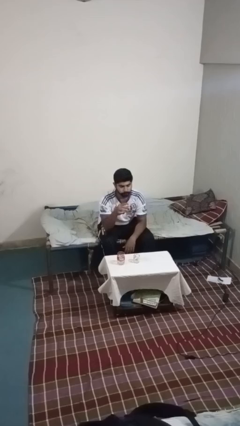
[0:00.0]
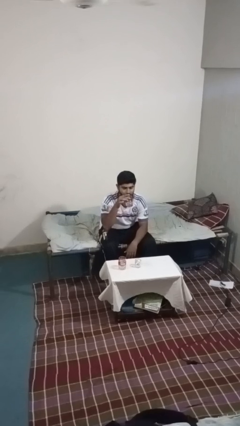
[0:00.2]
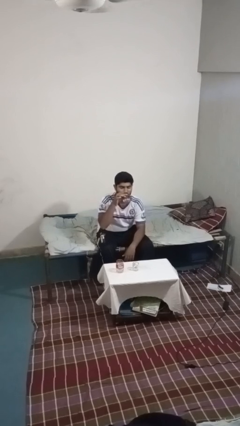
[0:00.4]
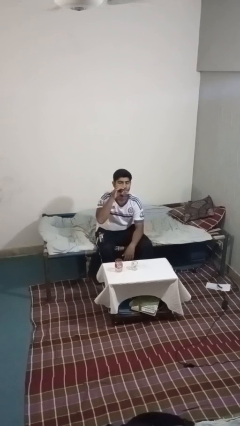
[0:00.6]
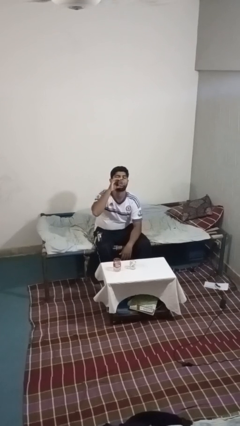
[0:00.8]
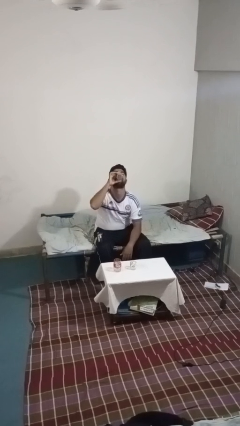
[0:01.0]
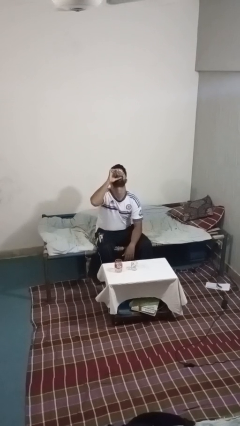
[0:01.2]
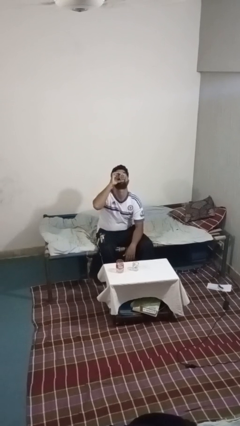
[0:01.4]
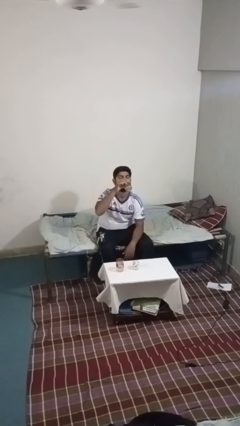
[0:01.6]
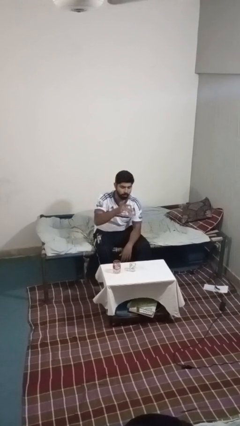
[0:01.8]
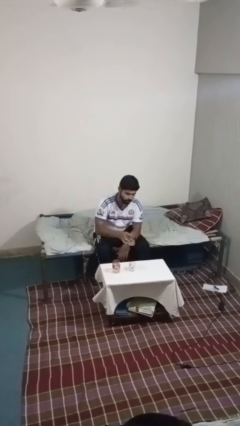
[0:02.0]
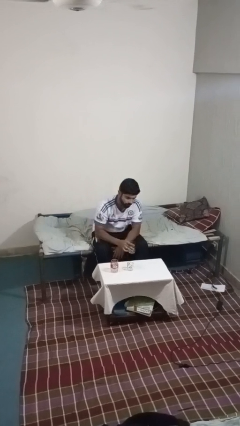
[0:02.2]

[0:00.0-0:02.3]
person drinks from shotglass

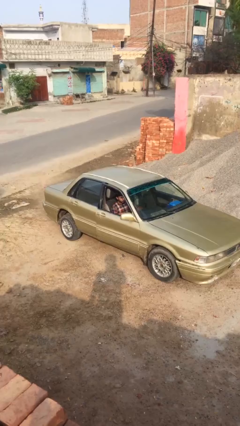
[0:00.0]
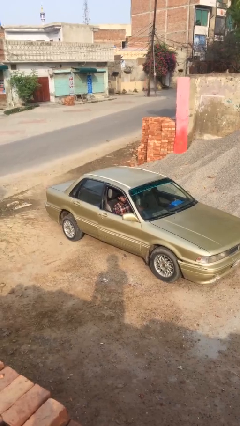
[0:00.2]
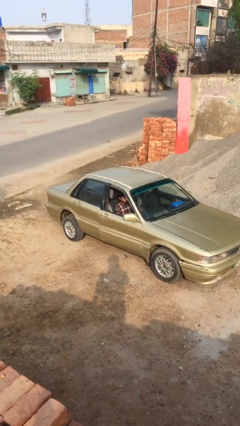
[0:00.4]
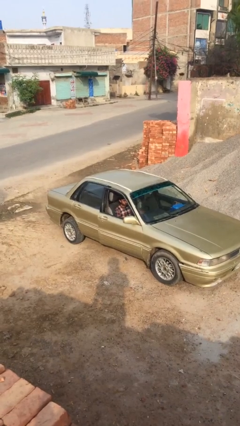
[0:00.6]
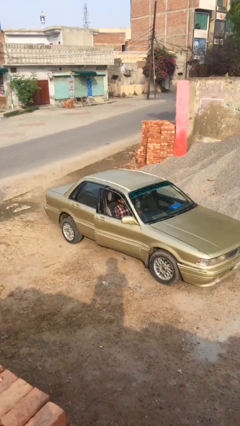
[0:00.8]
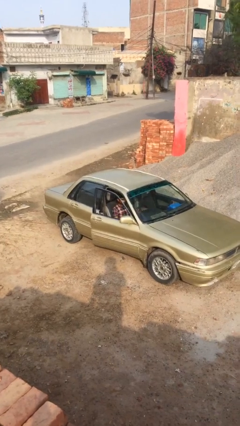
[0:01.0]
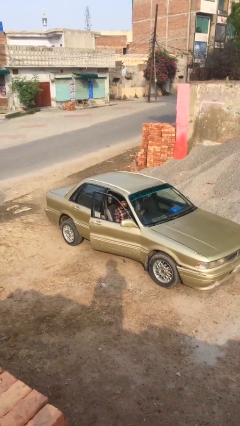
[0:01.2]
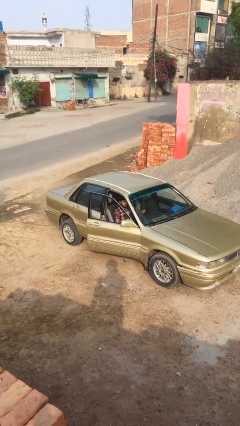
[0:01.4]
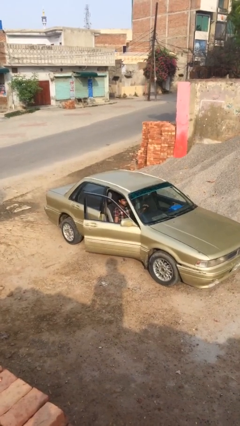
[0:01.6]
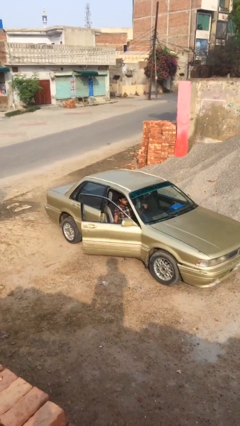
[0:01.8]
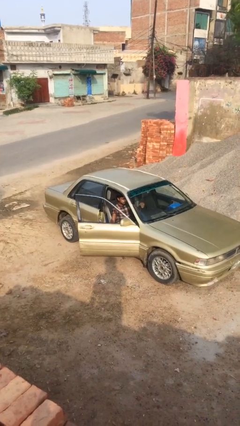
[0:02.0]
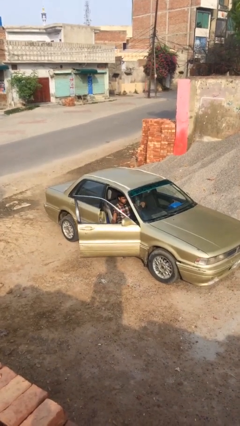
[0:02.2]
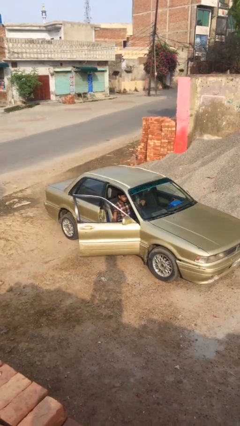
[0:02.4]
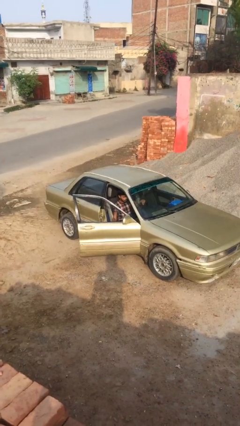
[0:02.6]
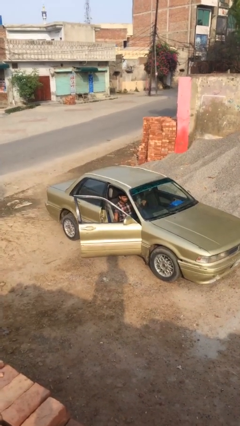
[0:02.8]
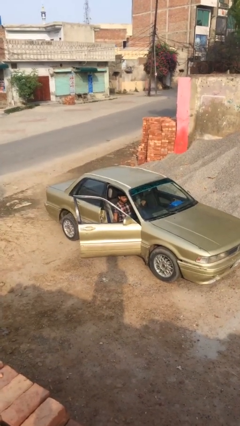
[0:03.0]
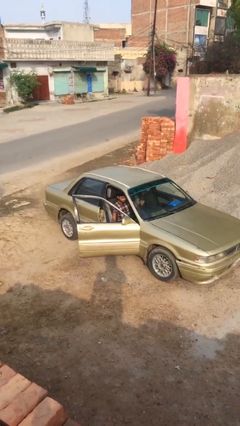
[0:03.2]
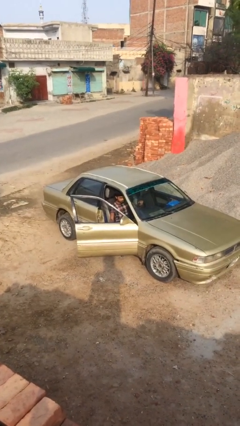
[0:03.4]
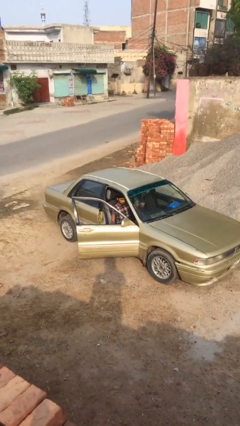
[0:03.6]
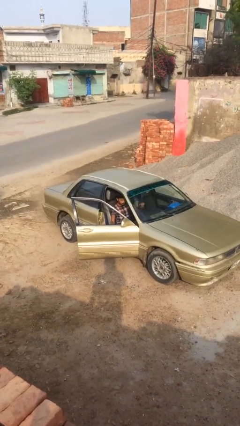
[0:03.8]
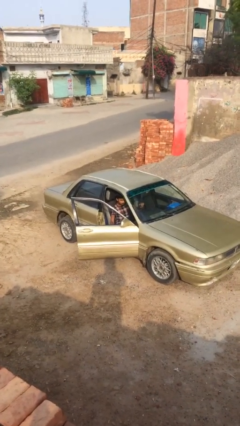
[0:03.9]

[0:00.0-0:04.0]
person opens car door

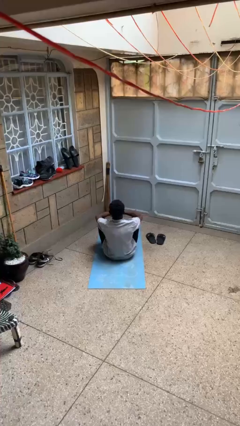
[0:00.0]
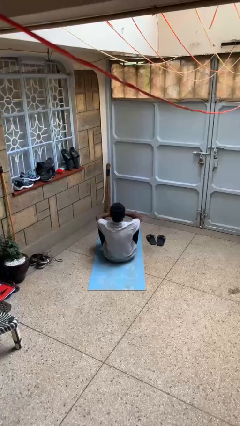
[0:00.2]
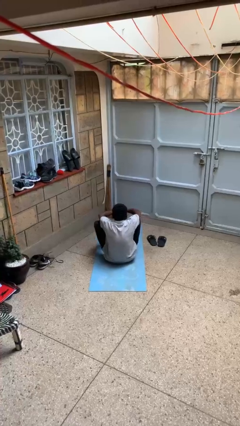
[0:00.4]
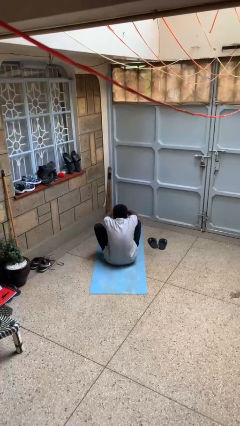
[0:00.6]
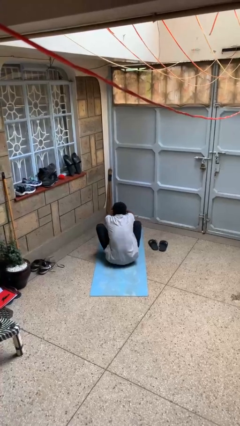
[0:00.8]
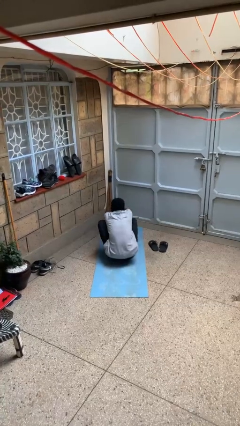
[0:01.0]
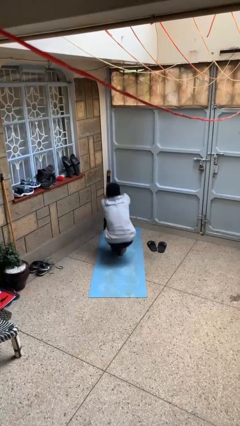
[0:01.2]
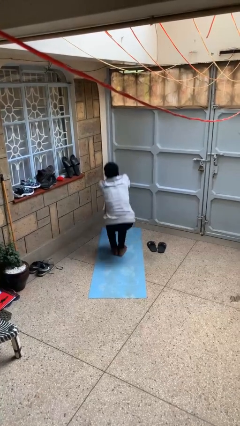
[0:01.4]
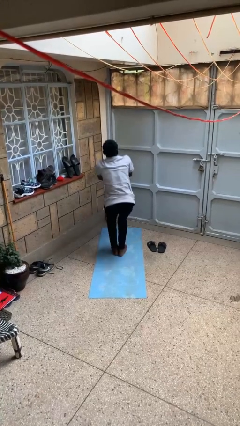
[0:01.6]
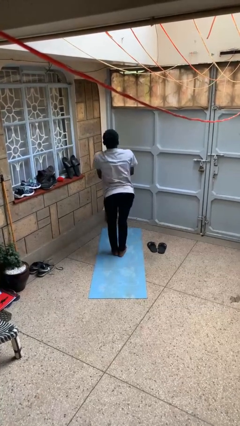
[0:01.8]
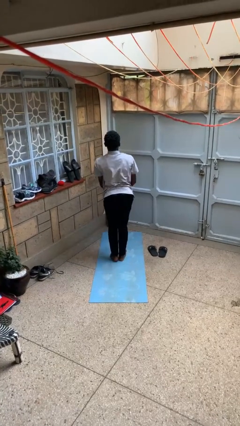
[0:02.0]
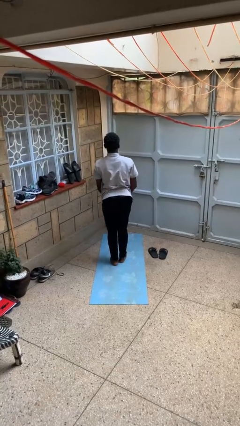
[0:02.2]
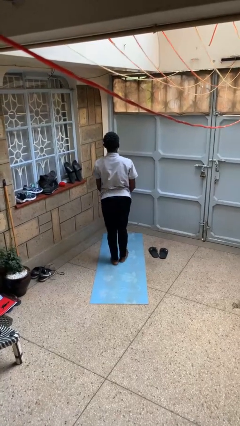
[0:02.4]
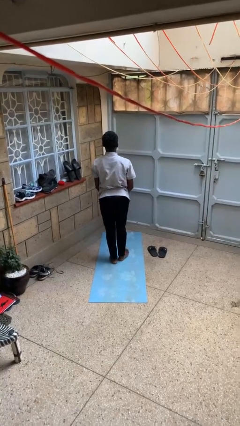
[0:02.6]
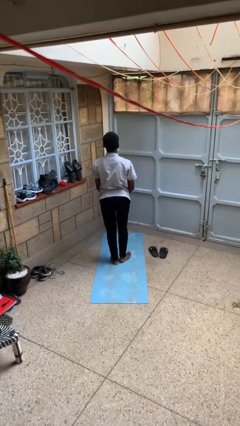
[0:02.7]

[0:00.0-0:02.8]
person stands up from floor

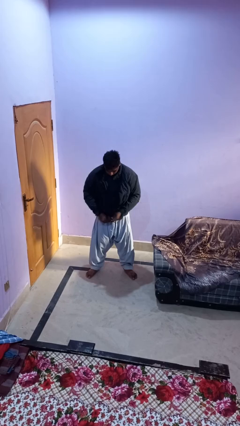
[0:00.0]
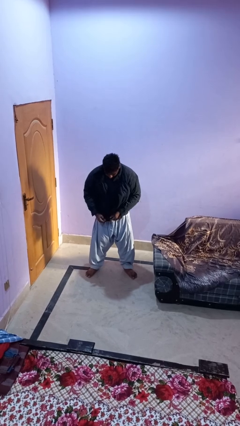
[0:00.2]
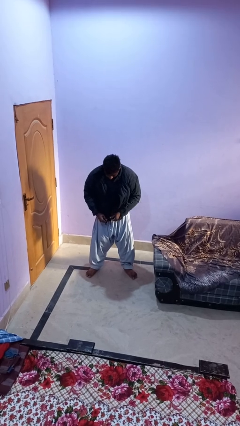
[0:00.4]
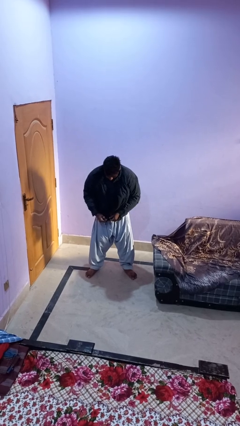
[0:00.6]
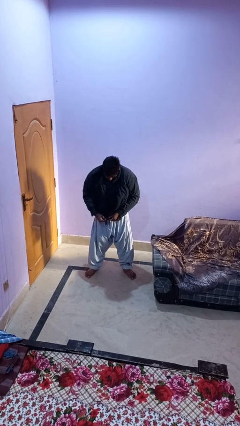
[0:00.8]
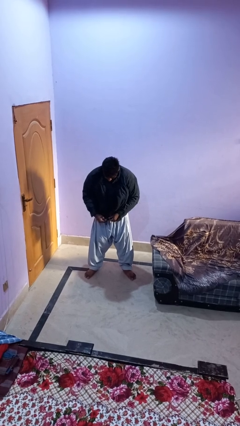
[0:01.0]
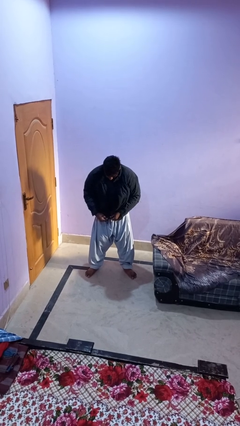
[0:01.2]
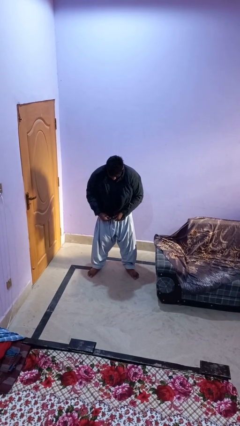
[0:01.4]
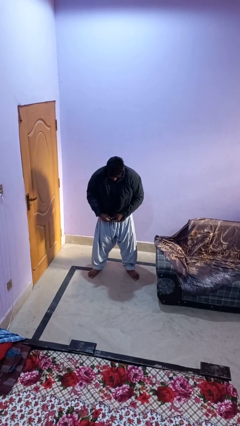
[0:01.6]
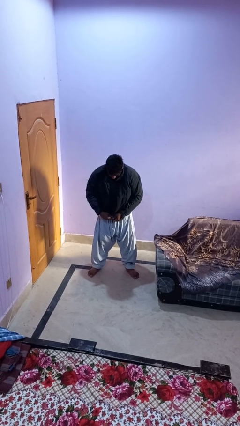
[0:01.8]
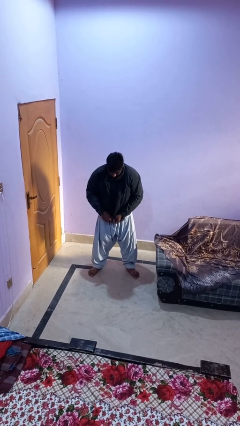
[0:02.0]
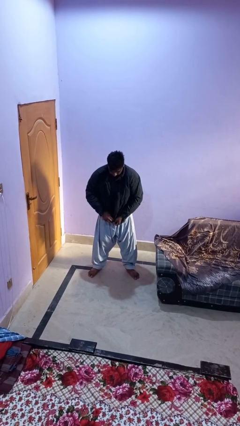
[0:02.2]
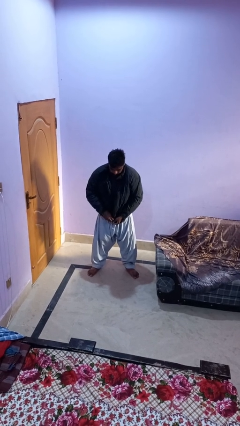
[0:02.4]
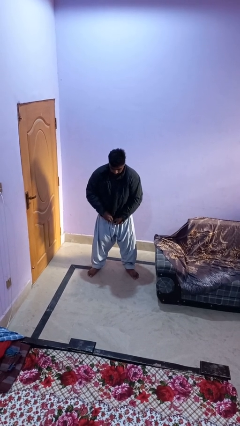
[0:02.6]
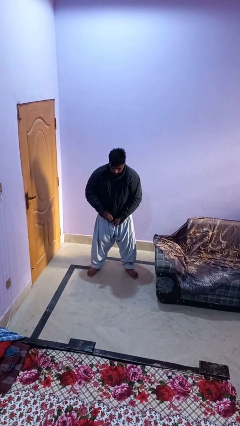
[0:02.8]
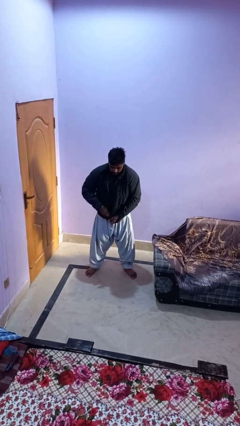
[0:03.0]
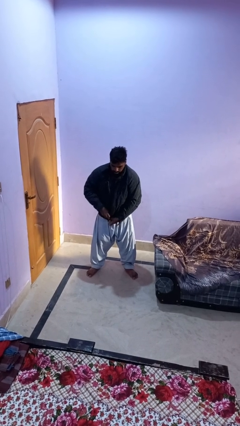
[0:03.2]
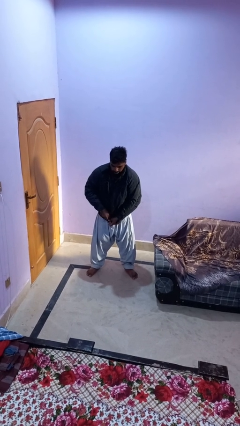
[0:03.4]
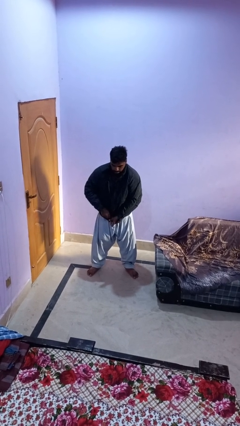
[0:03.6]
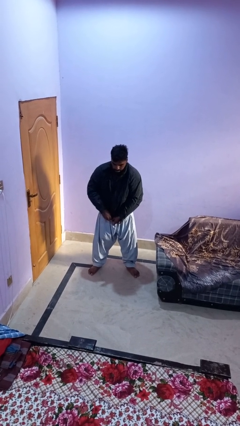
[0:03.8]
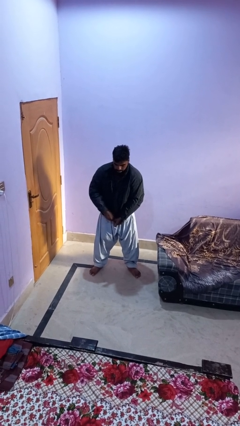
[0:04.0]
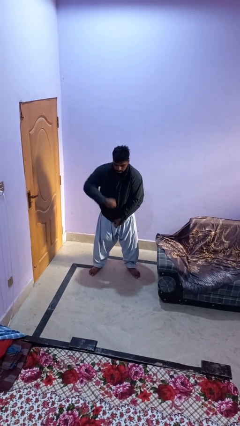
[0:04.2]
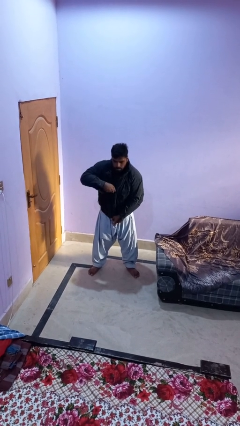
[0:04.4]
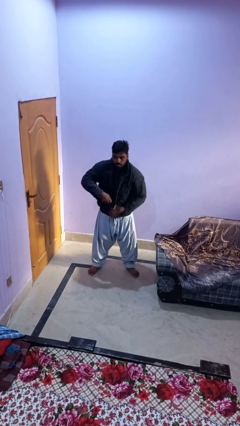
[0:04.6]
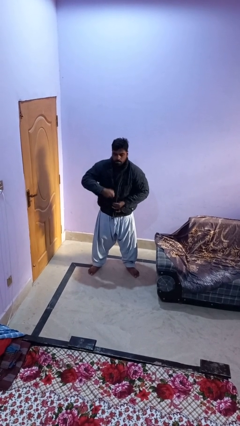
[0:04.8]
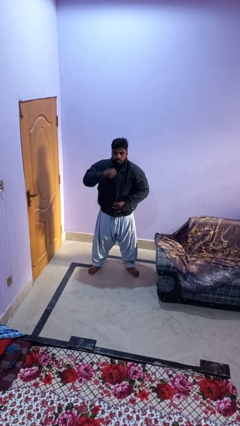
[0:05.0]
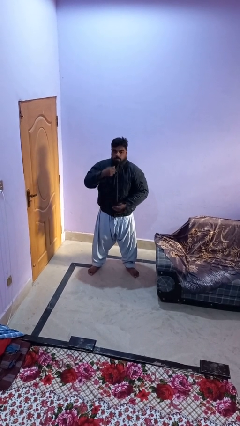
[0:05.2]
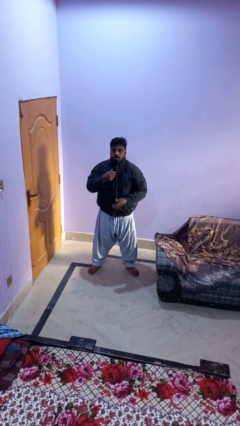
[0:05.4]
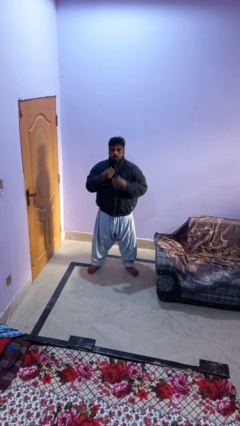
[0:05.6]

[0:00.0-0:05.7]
person zips up jacket

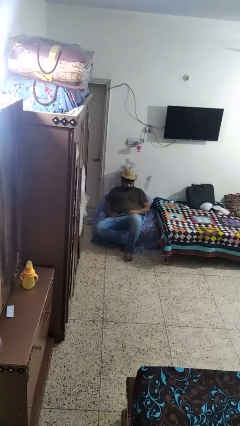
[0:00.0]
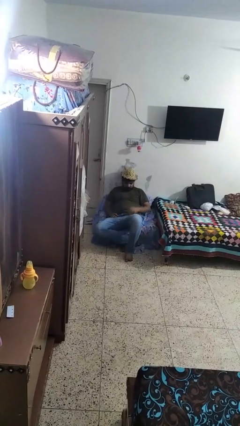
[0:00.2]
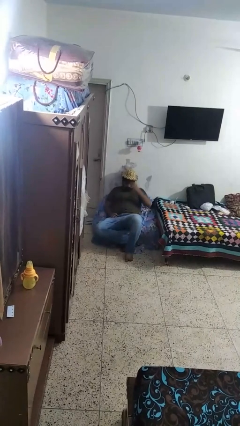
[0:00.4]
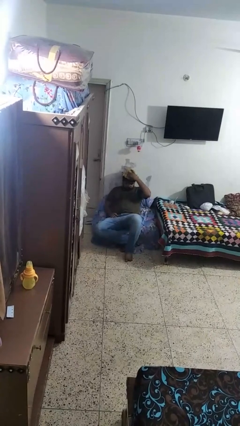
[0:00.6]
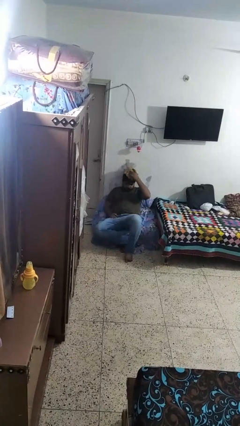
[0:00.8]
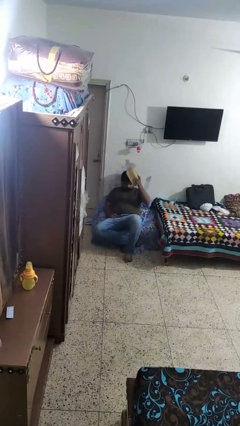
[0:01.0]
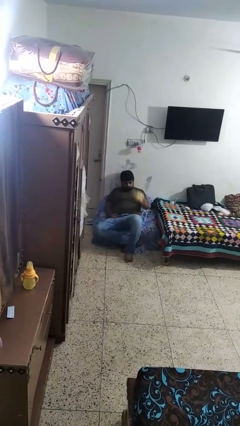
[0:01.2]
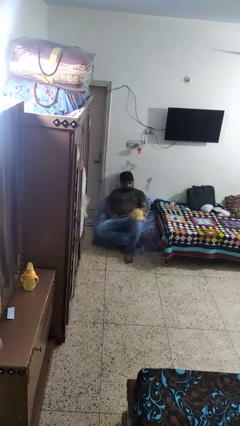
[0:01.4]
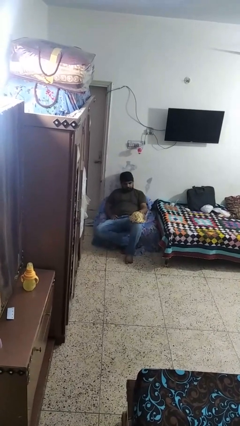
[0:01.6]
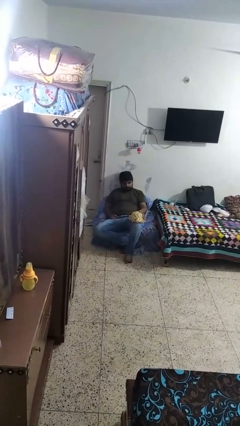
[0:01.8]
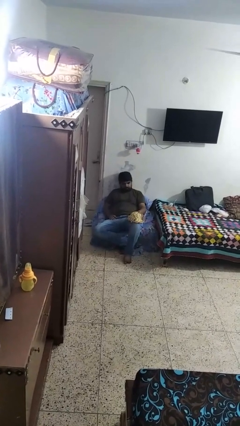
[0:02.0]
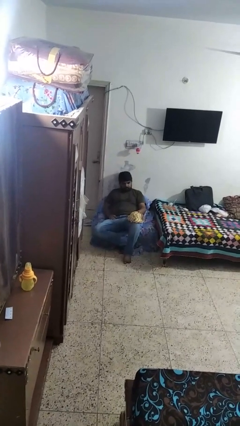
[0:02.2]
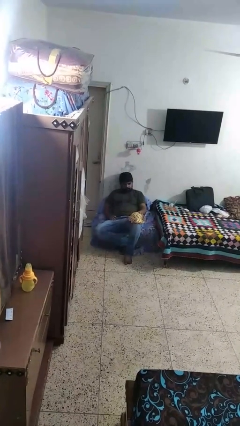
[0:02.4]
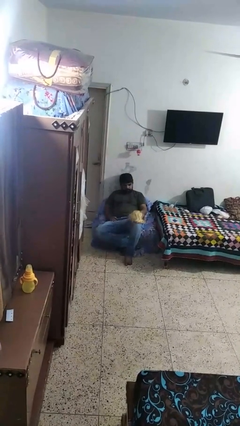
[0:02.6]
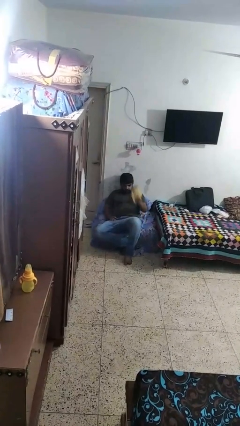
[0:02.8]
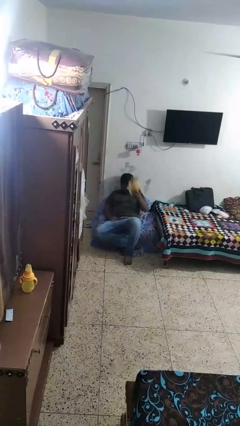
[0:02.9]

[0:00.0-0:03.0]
person takes off hat
